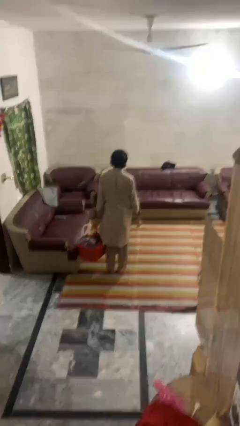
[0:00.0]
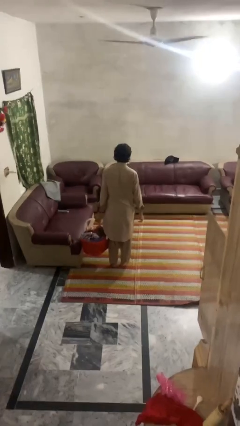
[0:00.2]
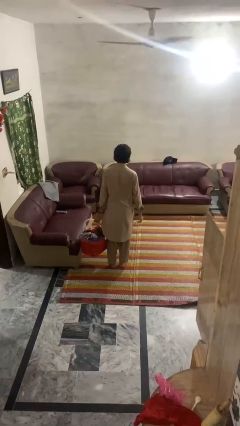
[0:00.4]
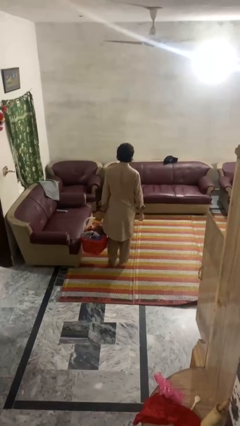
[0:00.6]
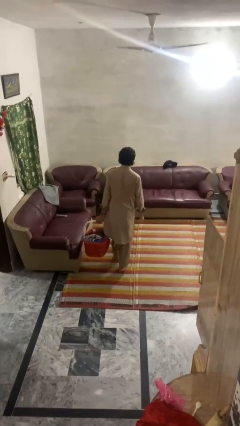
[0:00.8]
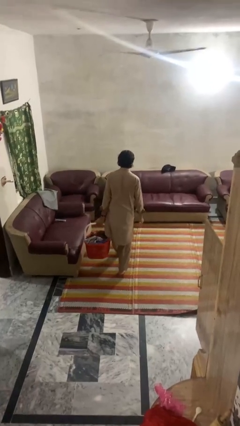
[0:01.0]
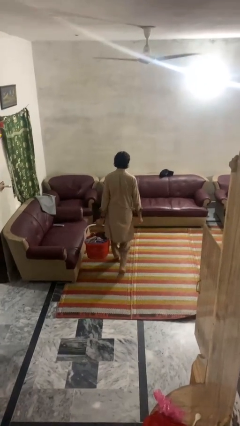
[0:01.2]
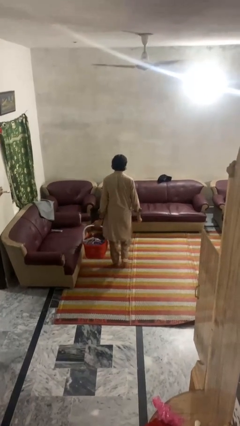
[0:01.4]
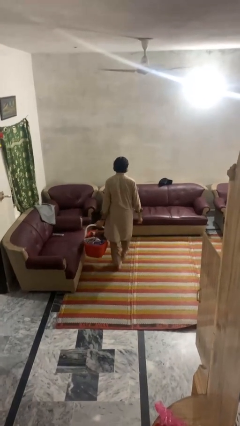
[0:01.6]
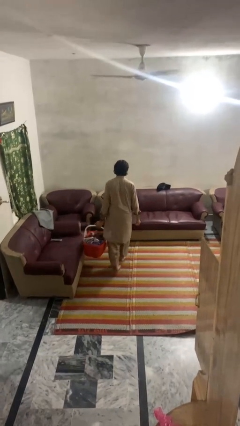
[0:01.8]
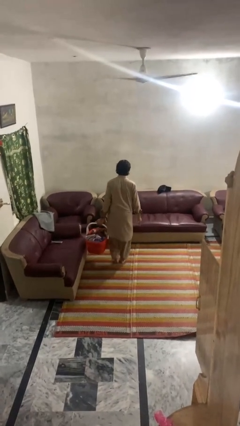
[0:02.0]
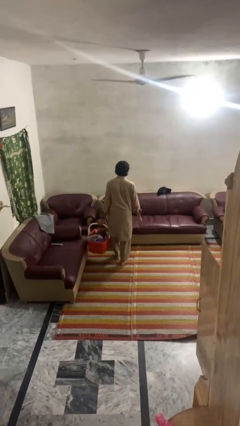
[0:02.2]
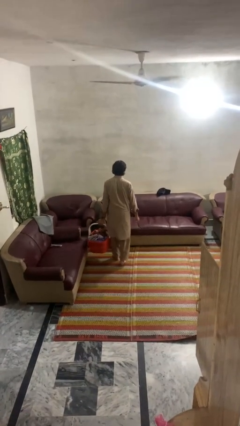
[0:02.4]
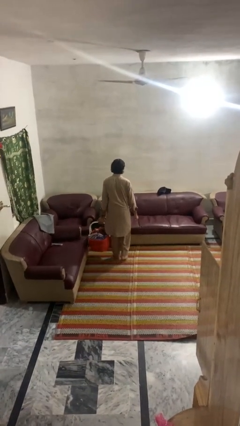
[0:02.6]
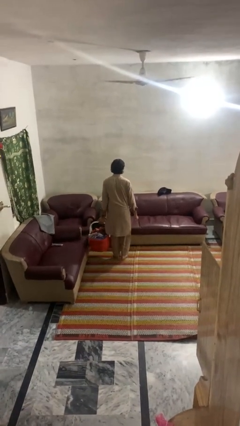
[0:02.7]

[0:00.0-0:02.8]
person carries laundry basket

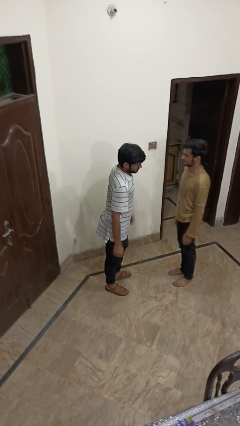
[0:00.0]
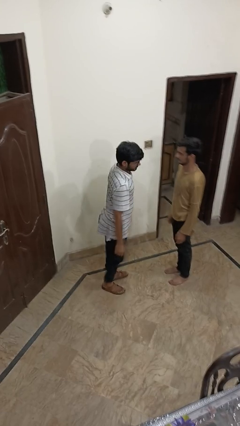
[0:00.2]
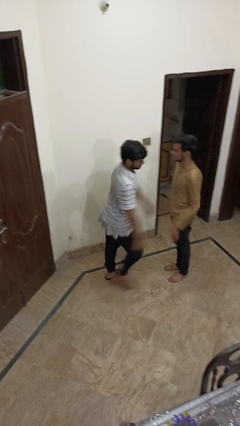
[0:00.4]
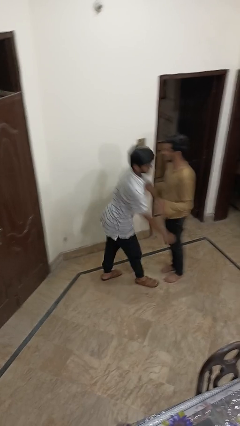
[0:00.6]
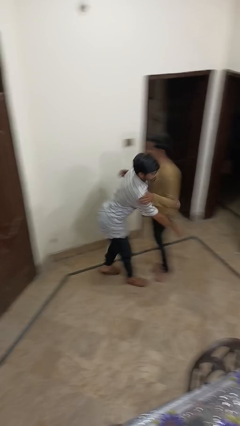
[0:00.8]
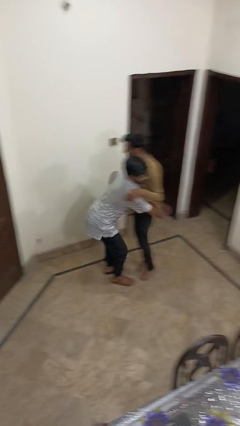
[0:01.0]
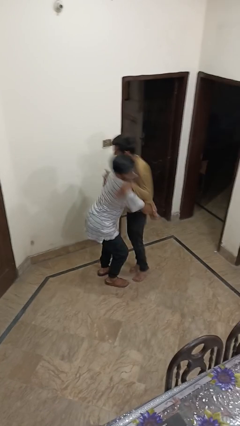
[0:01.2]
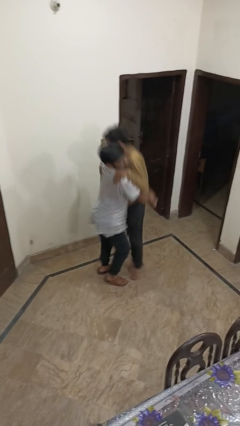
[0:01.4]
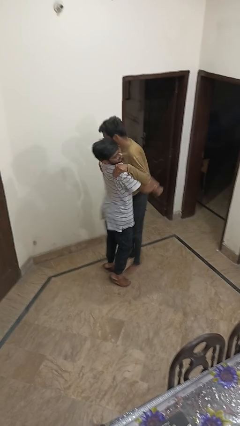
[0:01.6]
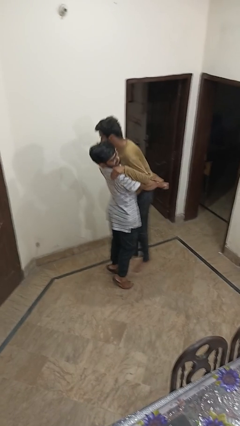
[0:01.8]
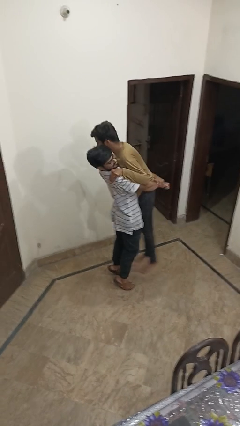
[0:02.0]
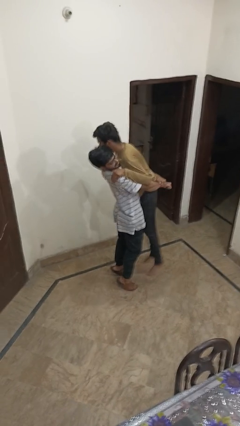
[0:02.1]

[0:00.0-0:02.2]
person picks up person

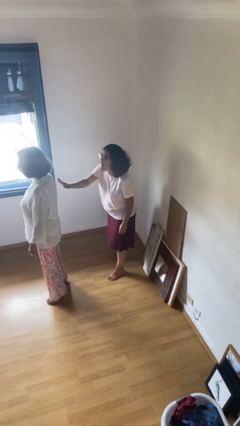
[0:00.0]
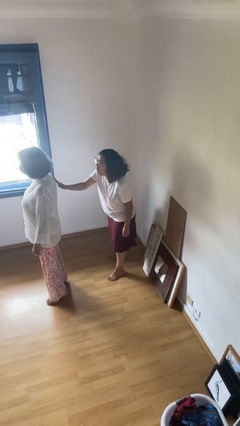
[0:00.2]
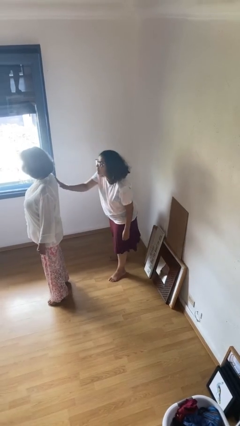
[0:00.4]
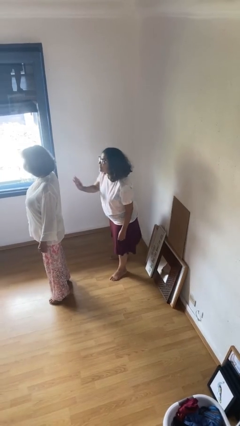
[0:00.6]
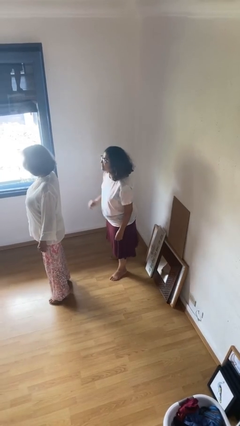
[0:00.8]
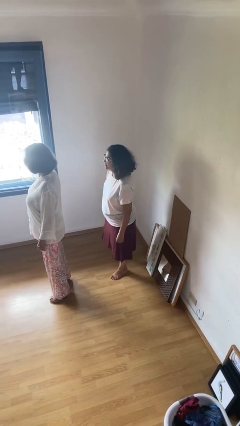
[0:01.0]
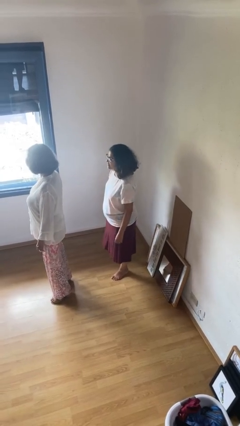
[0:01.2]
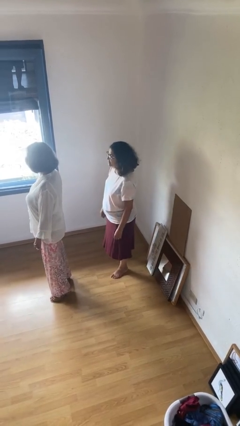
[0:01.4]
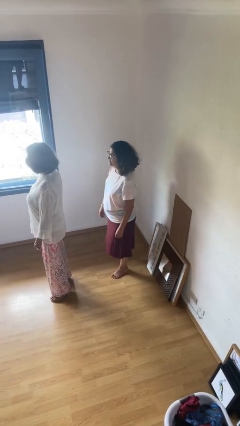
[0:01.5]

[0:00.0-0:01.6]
person touches back of person

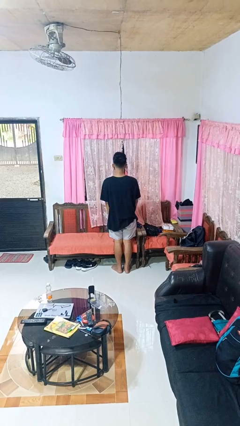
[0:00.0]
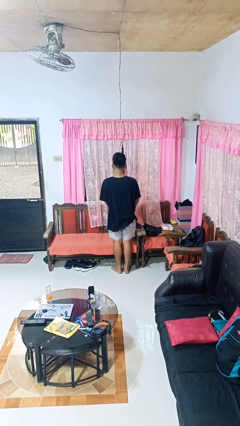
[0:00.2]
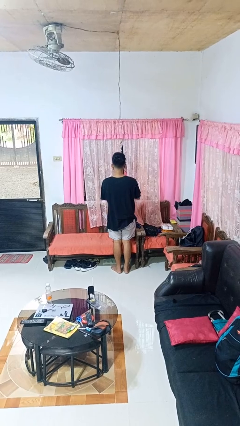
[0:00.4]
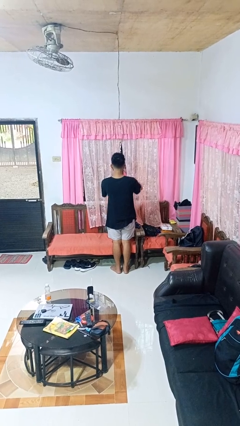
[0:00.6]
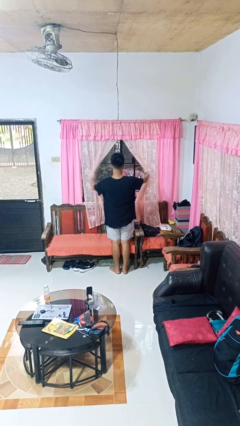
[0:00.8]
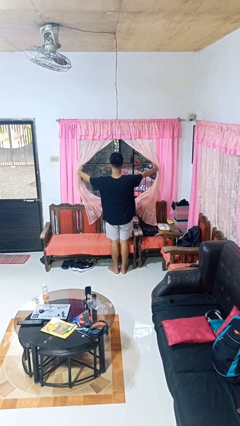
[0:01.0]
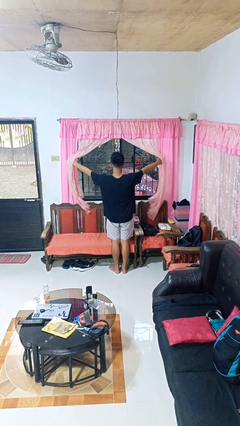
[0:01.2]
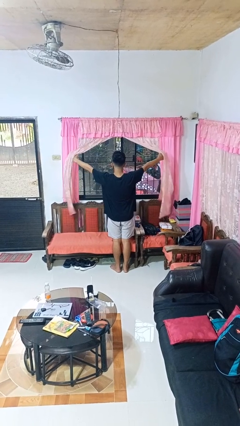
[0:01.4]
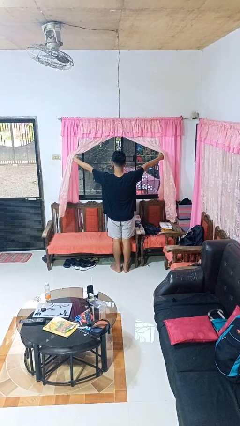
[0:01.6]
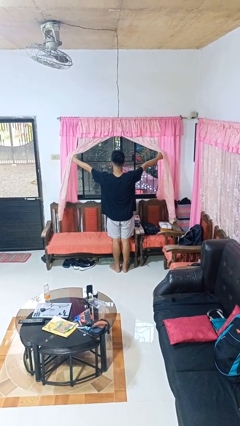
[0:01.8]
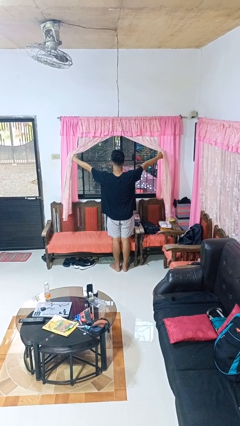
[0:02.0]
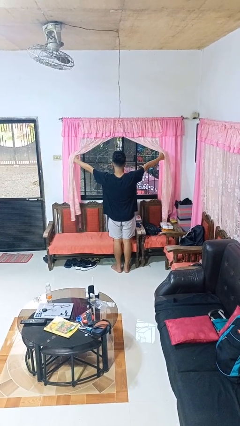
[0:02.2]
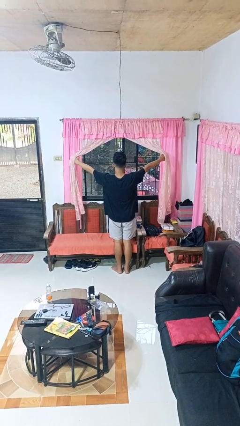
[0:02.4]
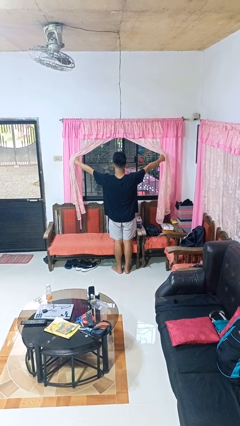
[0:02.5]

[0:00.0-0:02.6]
person opens curtains

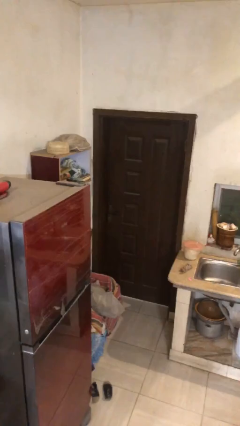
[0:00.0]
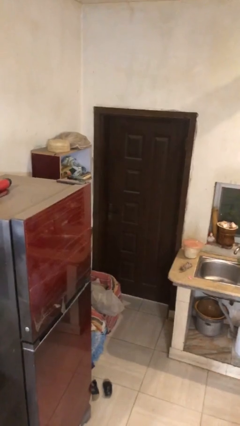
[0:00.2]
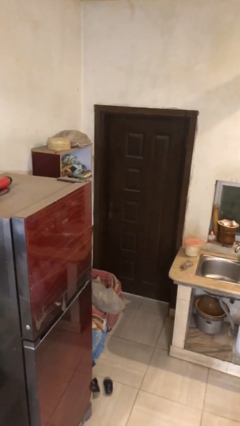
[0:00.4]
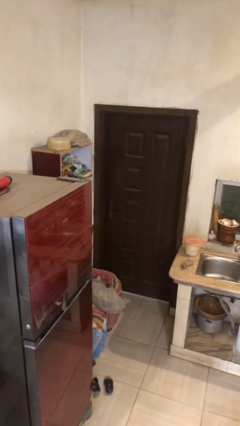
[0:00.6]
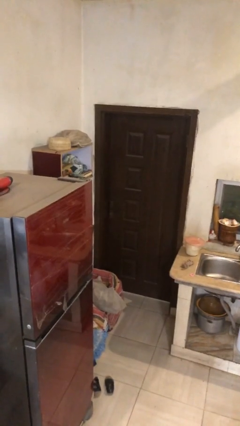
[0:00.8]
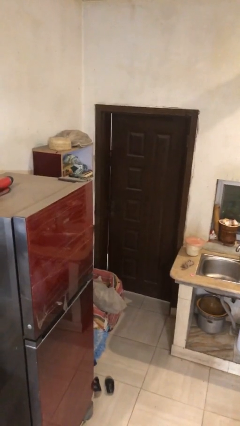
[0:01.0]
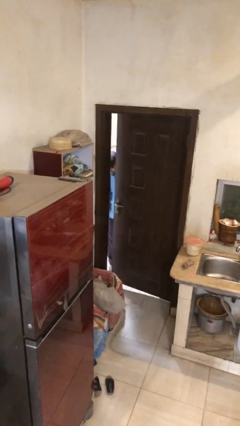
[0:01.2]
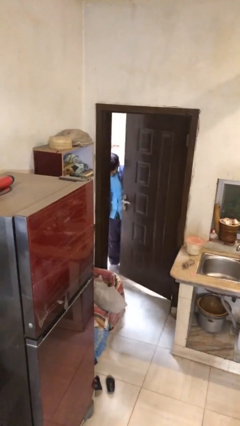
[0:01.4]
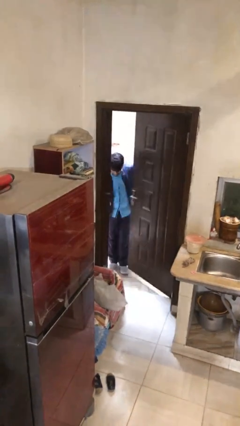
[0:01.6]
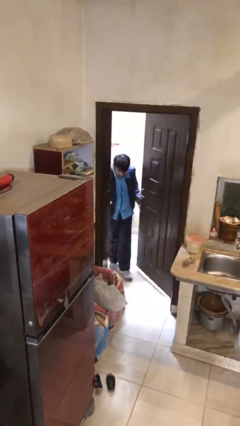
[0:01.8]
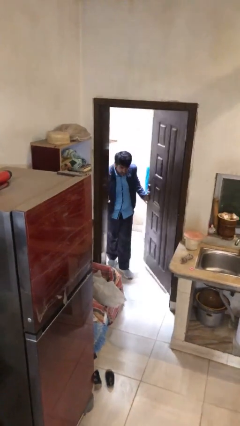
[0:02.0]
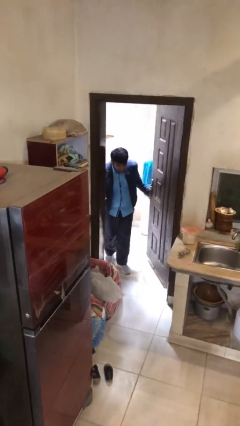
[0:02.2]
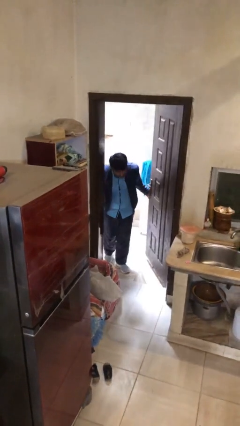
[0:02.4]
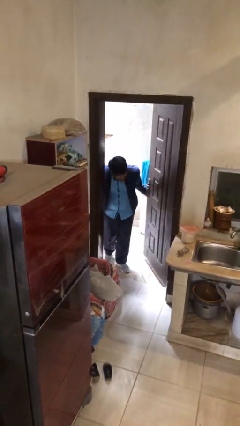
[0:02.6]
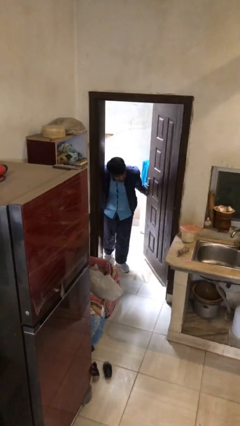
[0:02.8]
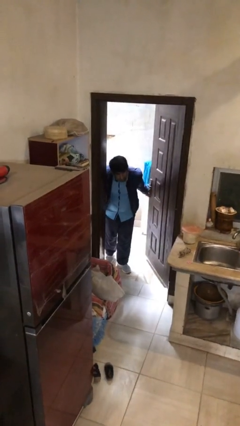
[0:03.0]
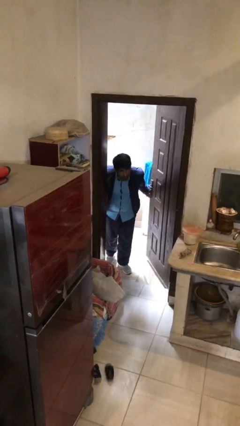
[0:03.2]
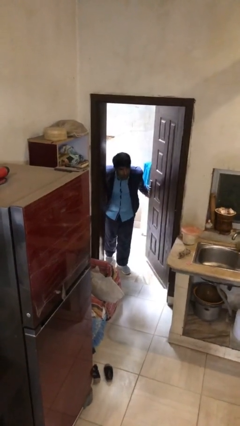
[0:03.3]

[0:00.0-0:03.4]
person opens facility door

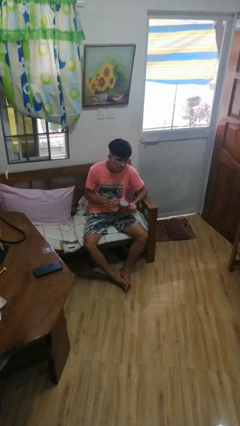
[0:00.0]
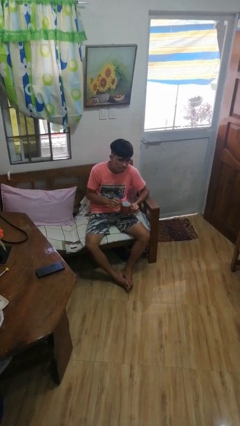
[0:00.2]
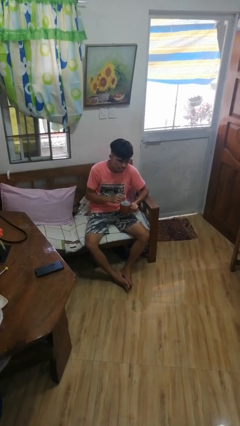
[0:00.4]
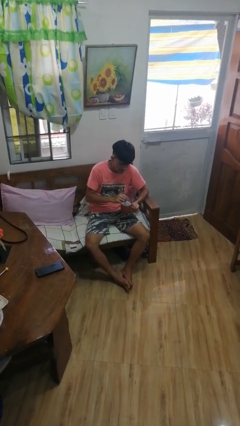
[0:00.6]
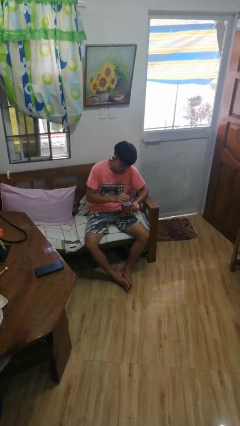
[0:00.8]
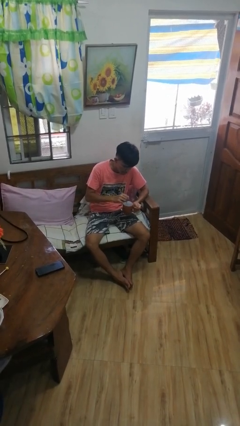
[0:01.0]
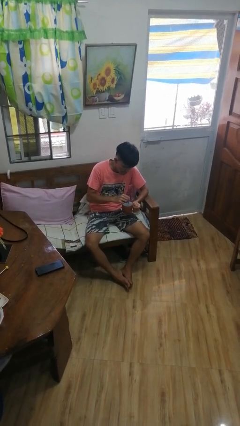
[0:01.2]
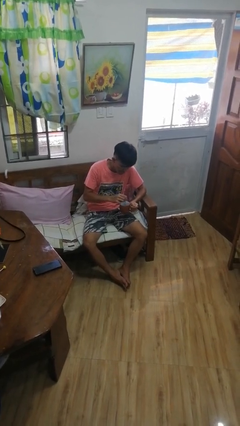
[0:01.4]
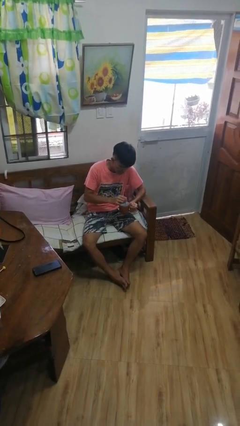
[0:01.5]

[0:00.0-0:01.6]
person stirs mug

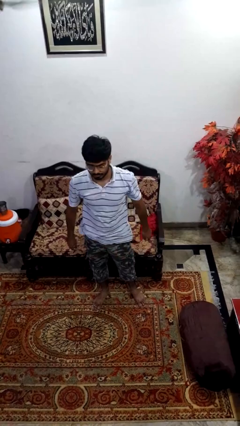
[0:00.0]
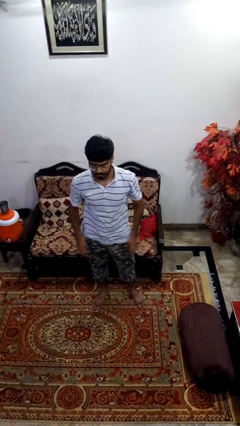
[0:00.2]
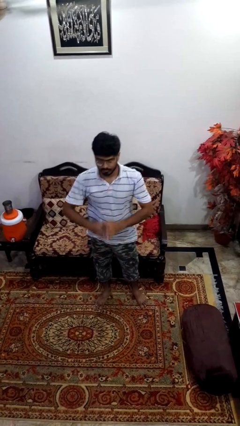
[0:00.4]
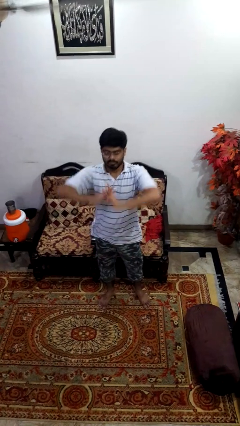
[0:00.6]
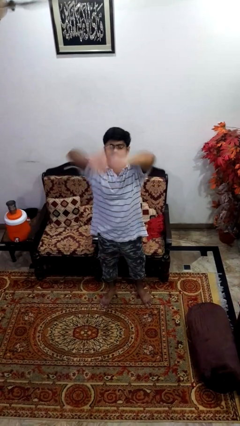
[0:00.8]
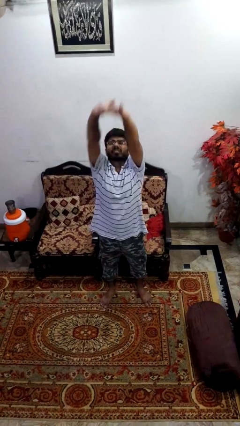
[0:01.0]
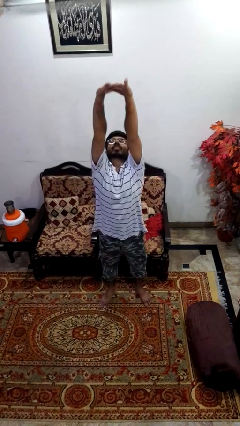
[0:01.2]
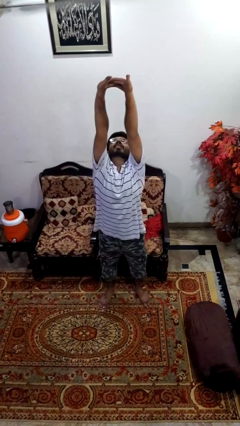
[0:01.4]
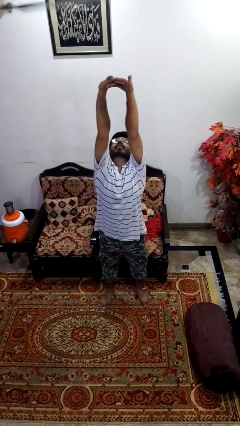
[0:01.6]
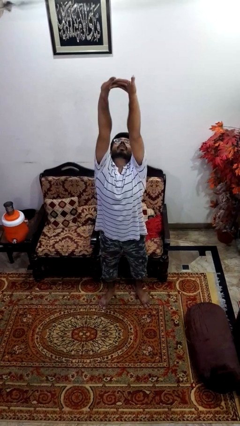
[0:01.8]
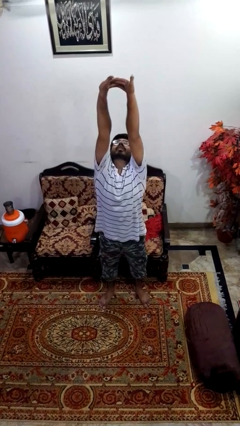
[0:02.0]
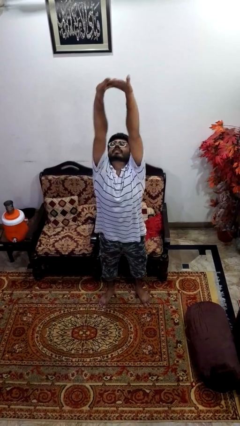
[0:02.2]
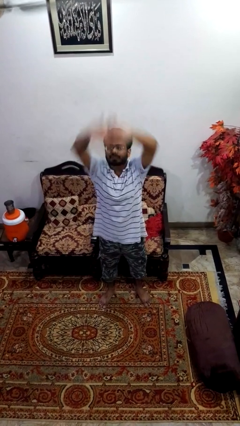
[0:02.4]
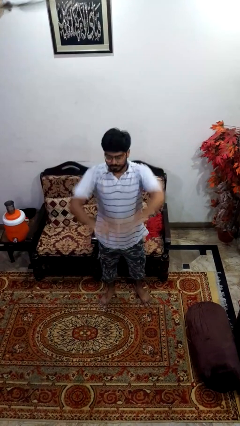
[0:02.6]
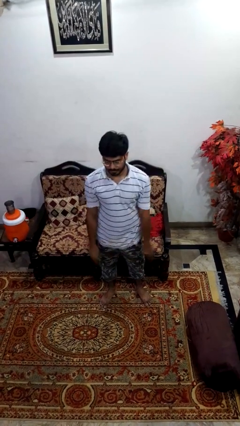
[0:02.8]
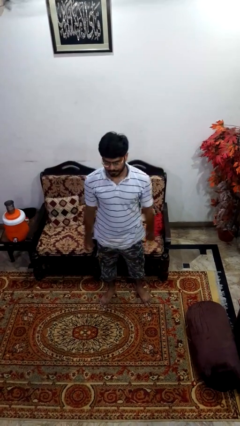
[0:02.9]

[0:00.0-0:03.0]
person stretches arms over head
